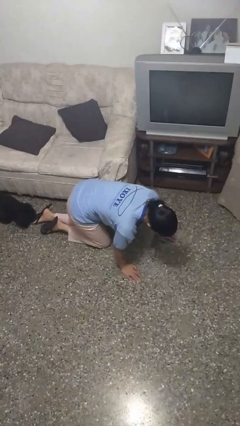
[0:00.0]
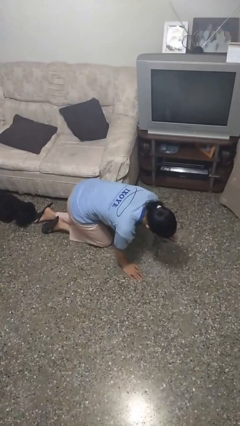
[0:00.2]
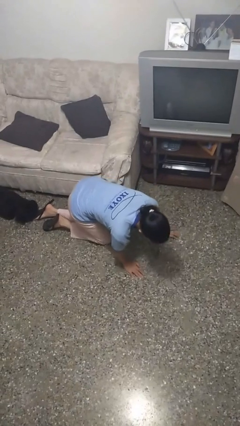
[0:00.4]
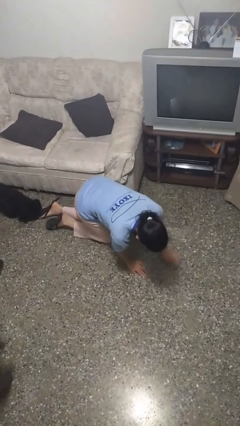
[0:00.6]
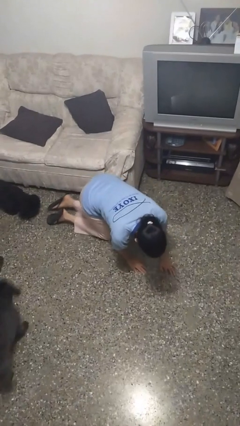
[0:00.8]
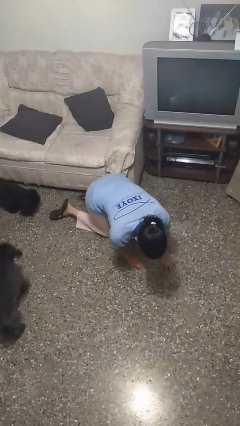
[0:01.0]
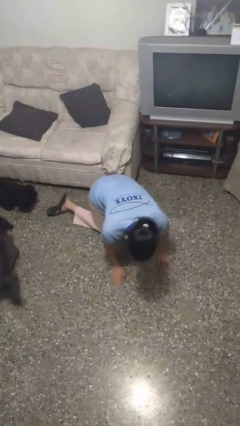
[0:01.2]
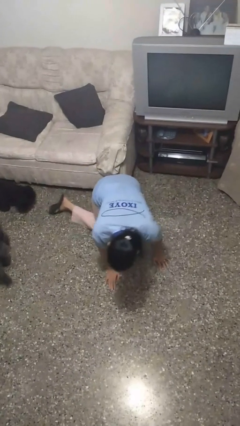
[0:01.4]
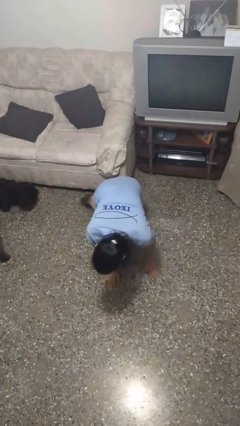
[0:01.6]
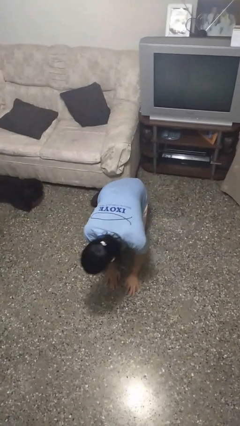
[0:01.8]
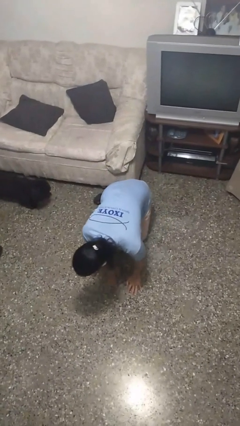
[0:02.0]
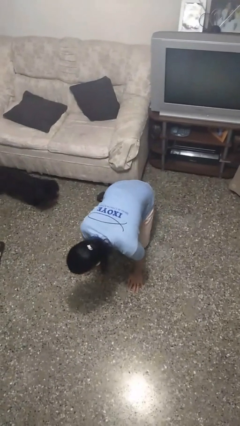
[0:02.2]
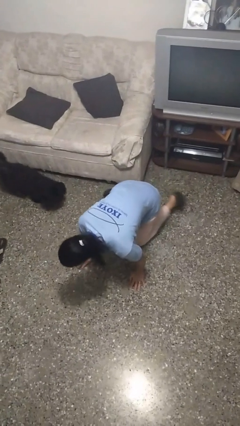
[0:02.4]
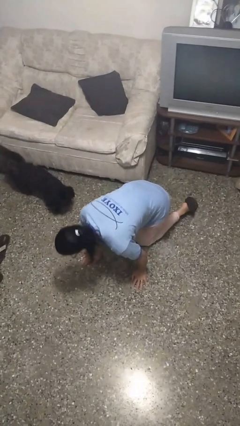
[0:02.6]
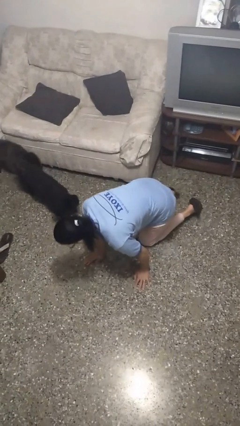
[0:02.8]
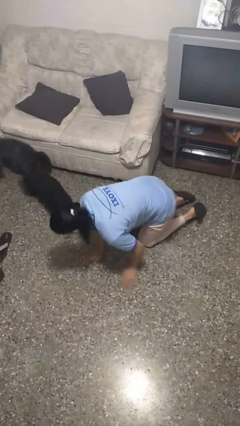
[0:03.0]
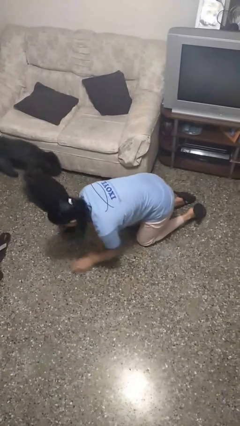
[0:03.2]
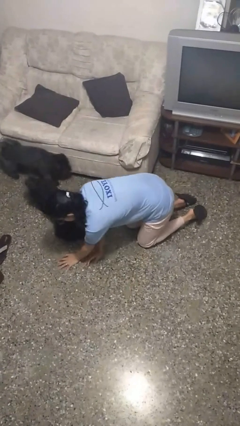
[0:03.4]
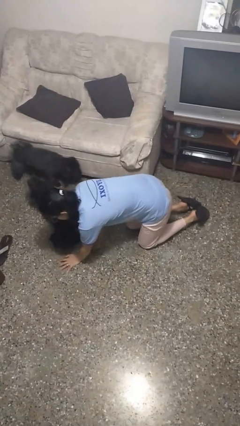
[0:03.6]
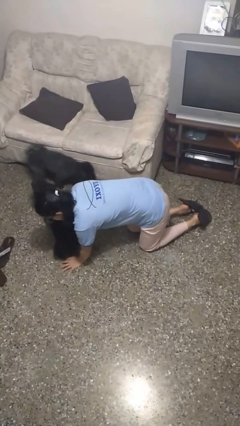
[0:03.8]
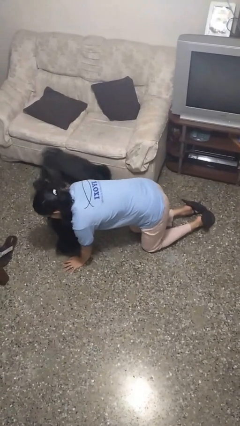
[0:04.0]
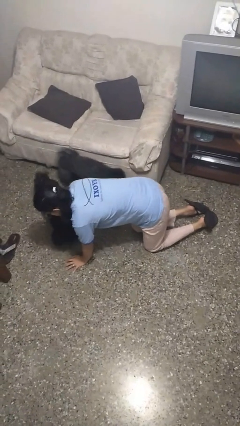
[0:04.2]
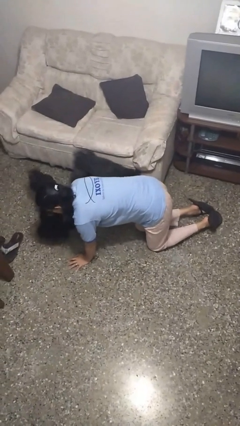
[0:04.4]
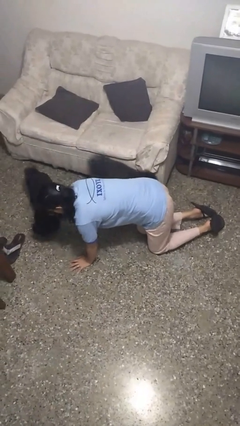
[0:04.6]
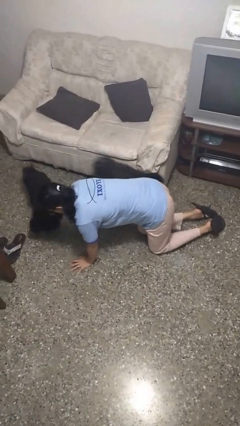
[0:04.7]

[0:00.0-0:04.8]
person crawls

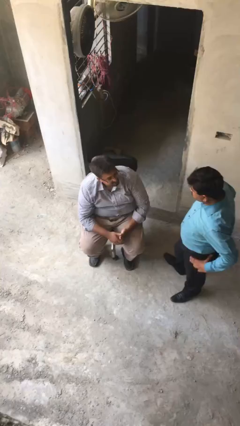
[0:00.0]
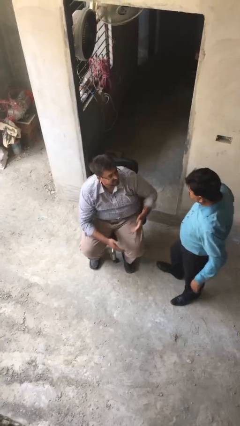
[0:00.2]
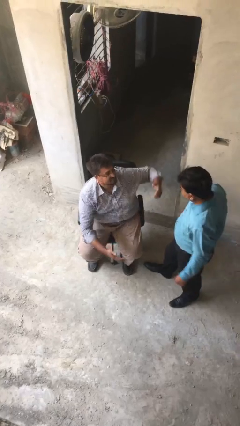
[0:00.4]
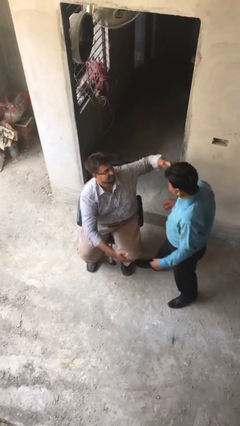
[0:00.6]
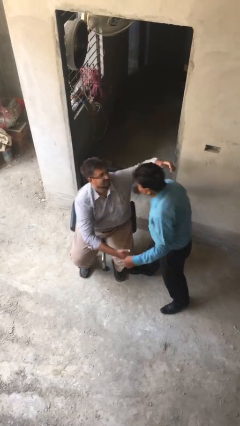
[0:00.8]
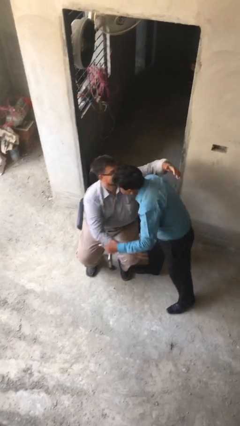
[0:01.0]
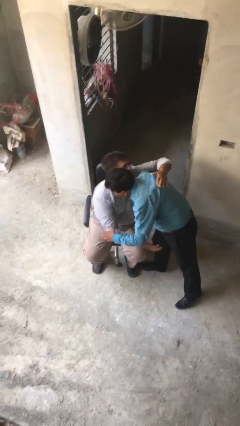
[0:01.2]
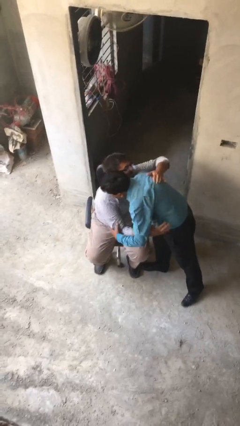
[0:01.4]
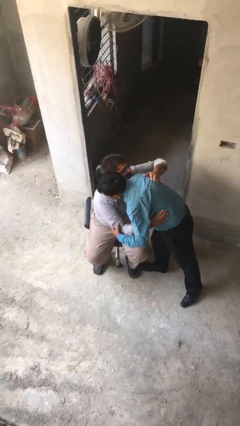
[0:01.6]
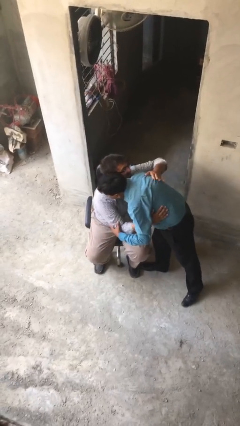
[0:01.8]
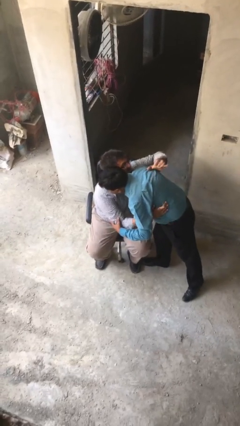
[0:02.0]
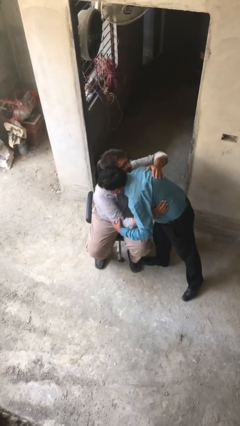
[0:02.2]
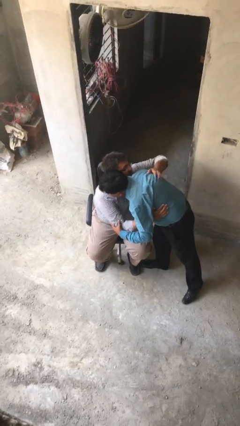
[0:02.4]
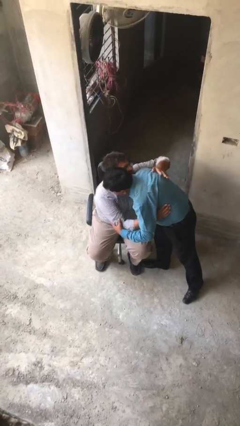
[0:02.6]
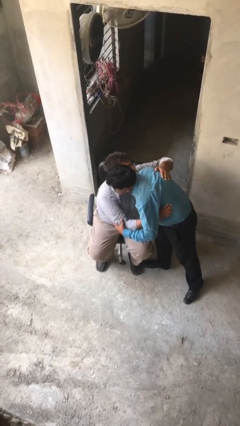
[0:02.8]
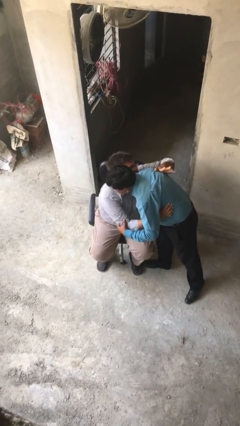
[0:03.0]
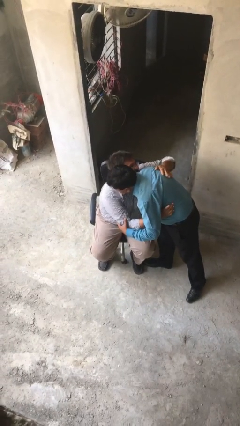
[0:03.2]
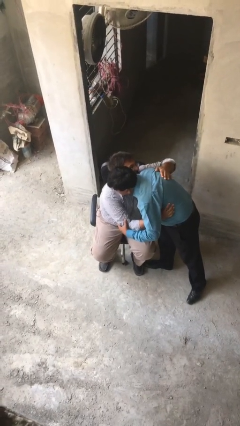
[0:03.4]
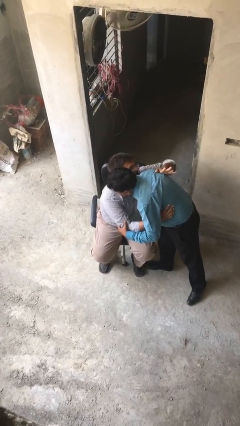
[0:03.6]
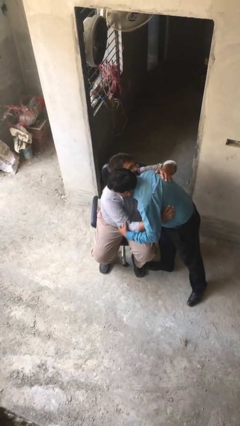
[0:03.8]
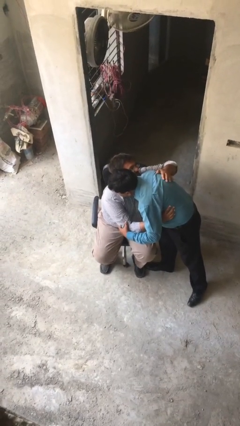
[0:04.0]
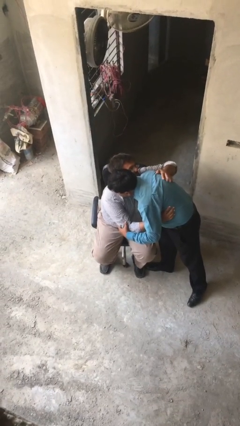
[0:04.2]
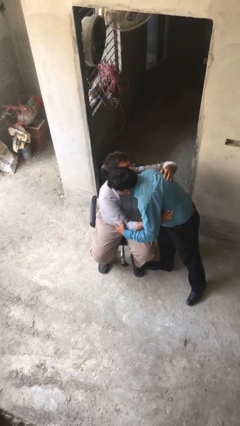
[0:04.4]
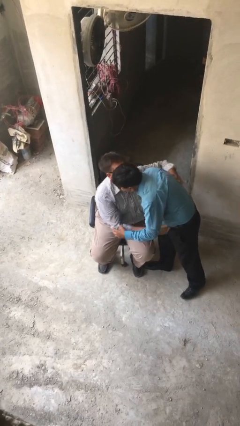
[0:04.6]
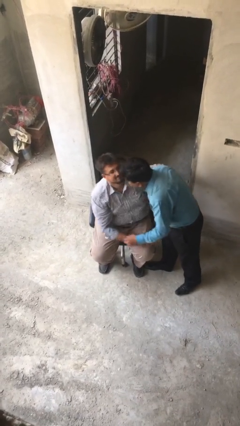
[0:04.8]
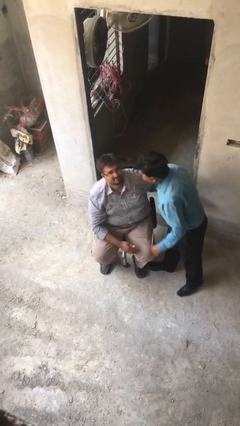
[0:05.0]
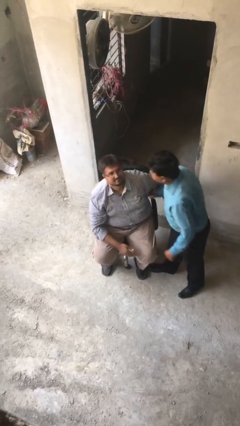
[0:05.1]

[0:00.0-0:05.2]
person embraces person

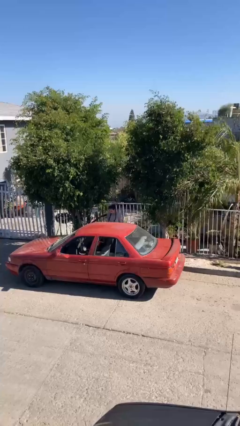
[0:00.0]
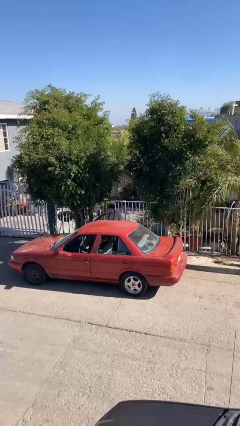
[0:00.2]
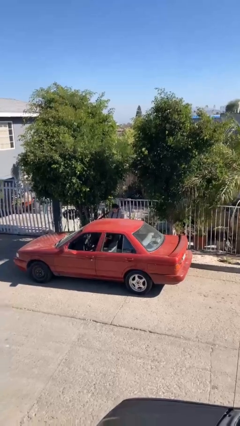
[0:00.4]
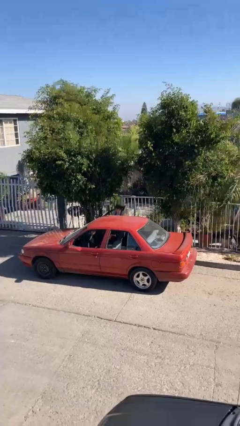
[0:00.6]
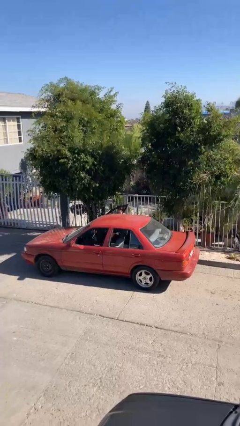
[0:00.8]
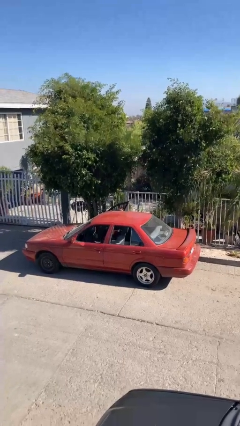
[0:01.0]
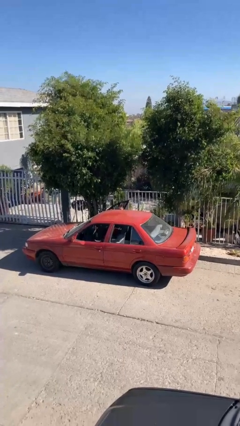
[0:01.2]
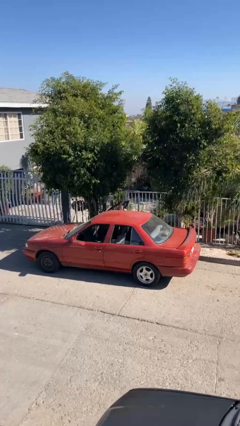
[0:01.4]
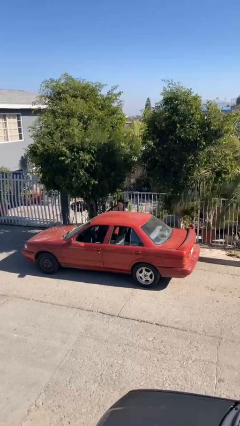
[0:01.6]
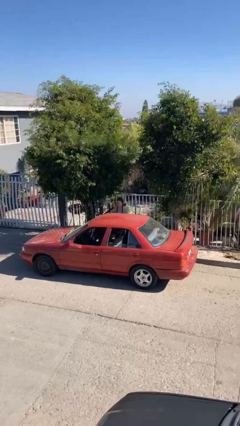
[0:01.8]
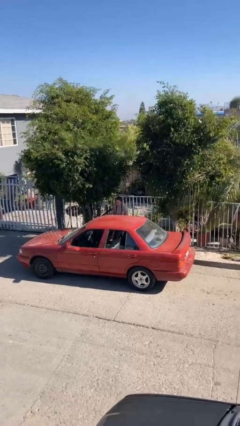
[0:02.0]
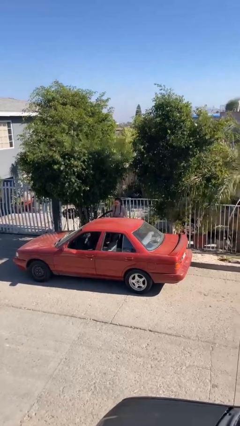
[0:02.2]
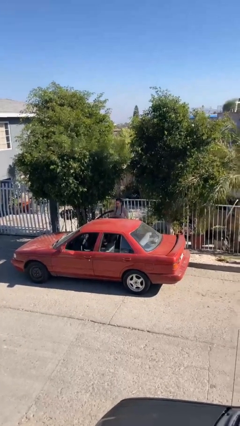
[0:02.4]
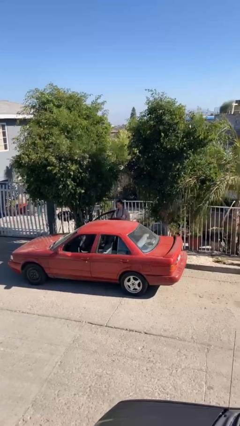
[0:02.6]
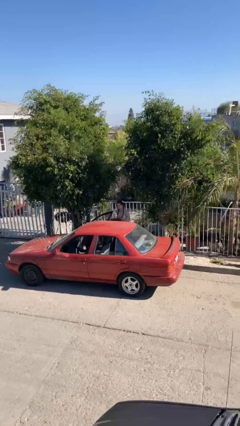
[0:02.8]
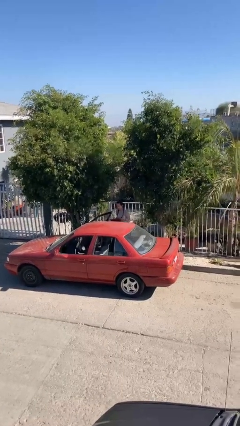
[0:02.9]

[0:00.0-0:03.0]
person unloads car

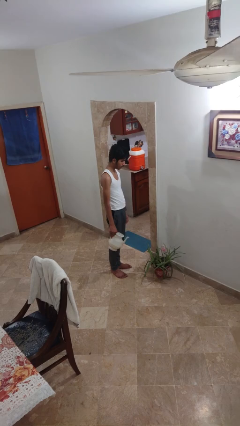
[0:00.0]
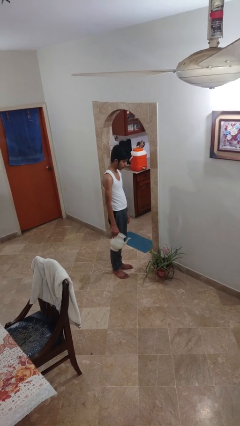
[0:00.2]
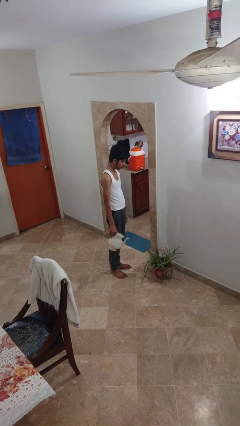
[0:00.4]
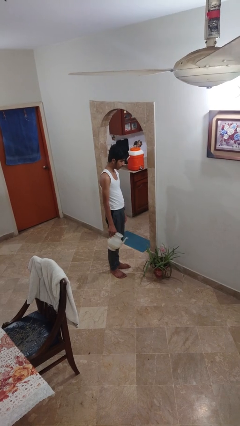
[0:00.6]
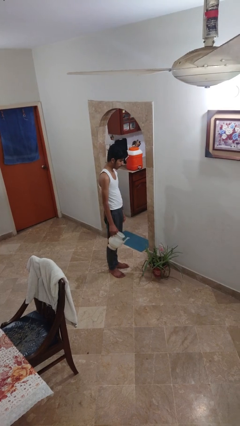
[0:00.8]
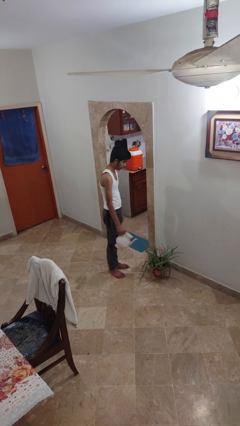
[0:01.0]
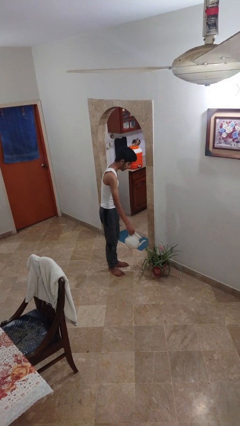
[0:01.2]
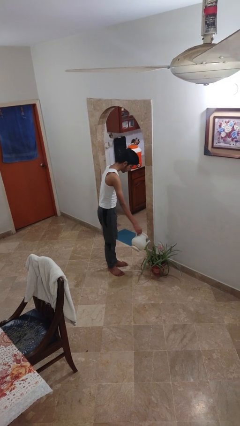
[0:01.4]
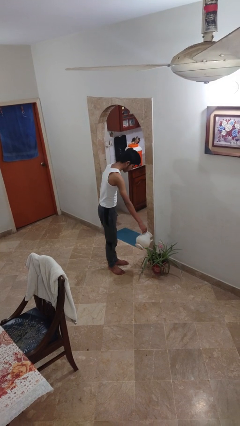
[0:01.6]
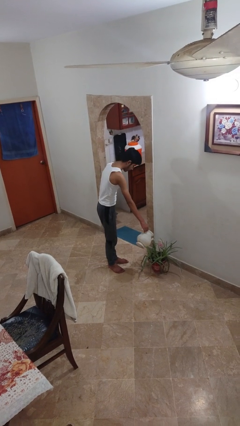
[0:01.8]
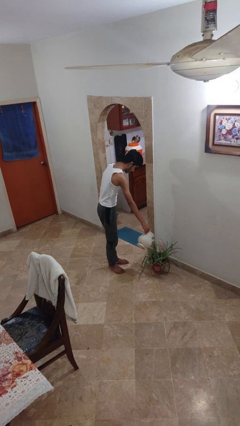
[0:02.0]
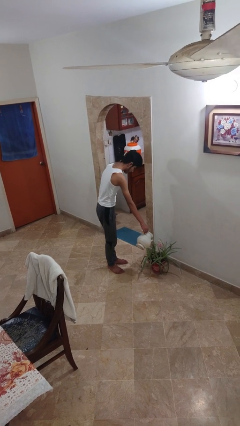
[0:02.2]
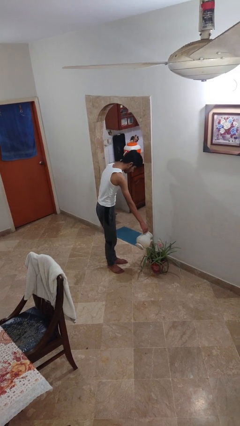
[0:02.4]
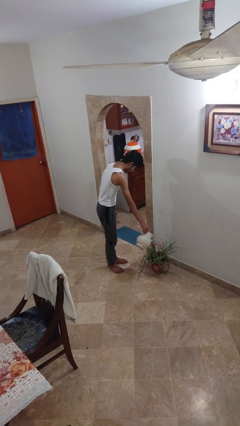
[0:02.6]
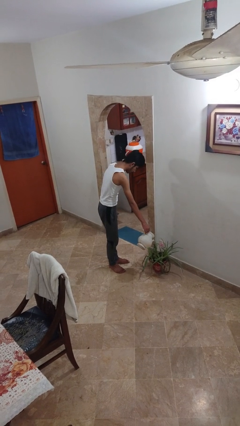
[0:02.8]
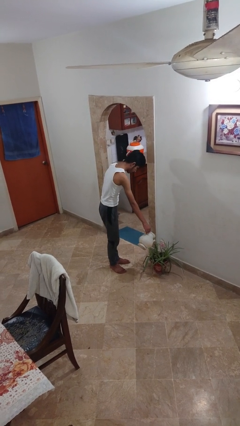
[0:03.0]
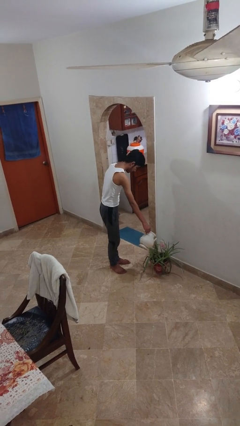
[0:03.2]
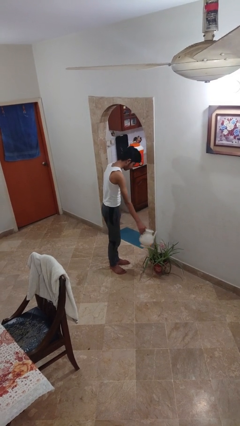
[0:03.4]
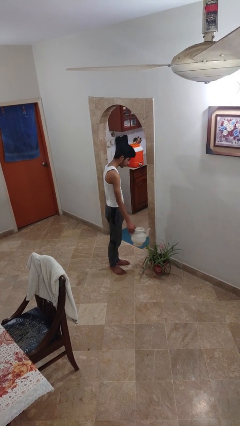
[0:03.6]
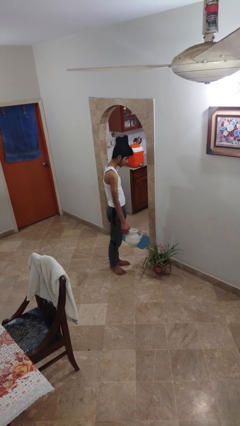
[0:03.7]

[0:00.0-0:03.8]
person waters houseplant

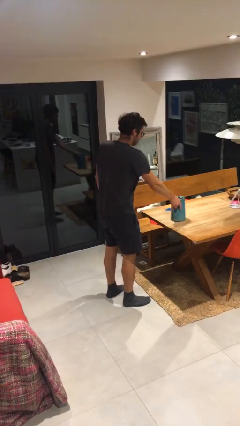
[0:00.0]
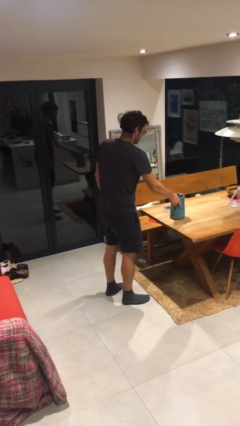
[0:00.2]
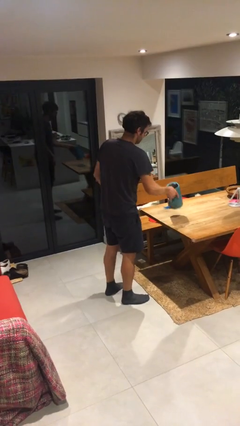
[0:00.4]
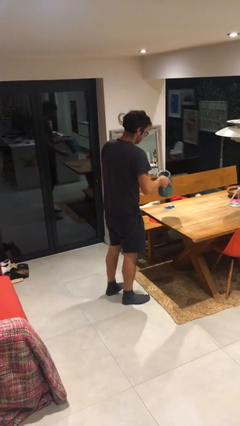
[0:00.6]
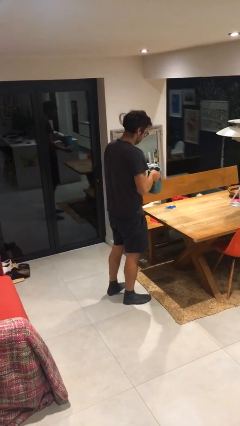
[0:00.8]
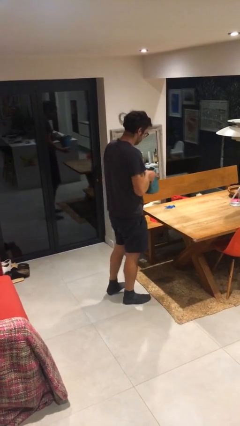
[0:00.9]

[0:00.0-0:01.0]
person picks up object from table
